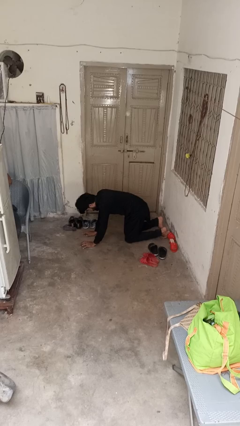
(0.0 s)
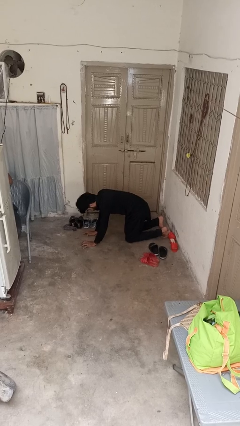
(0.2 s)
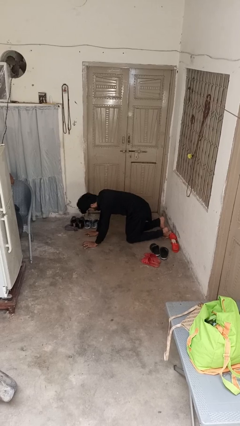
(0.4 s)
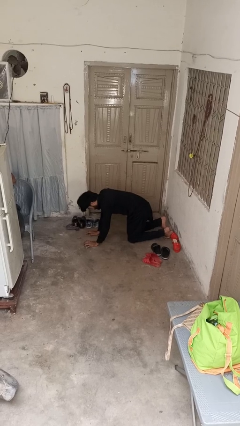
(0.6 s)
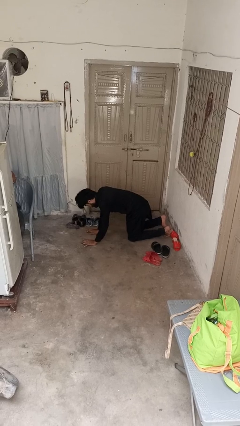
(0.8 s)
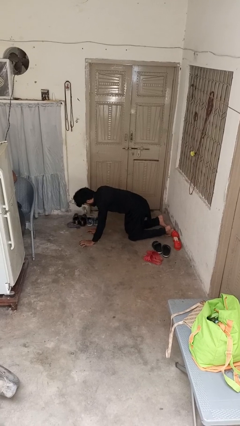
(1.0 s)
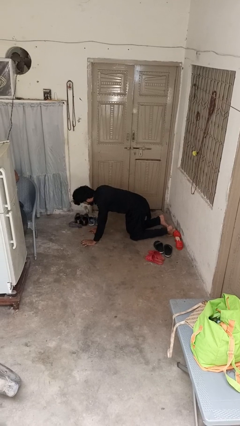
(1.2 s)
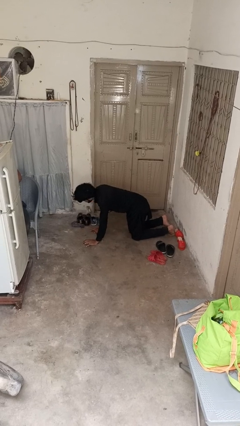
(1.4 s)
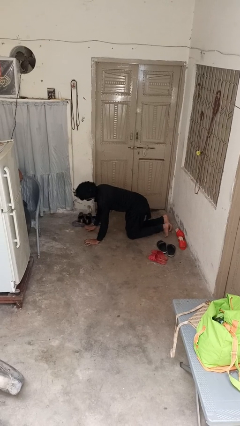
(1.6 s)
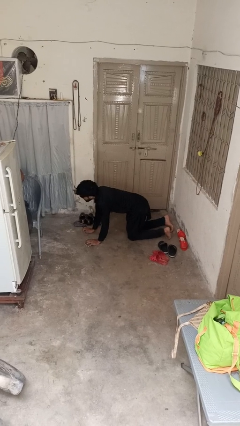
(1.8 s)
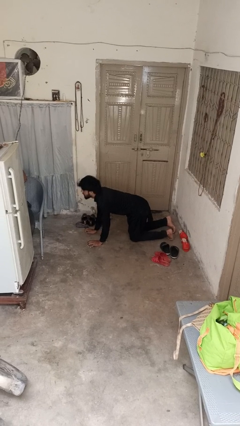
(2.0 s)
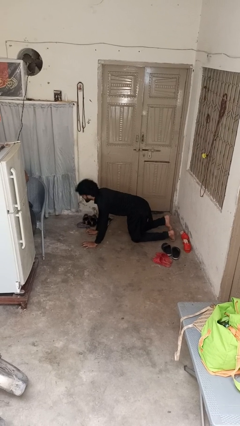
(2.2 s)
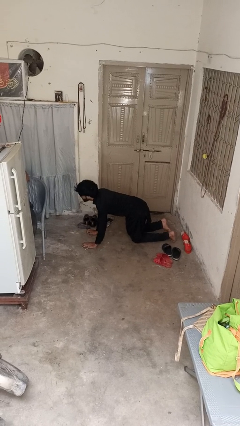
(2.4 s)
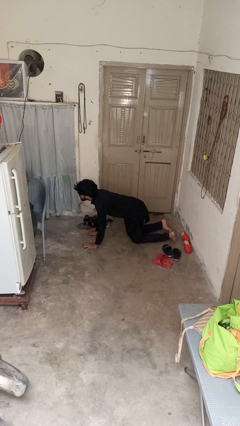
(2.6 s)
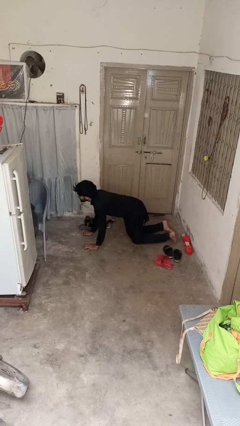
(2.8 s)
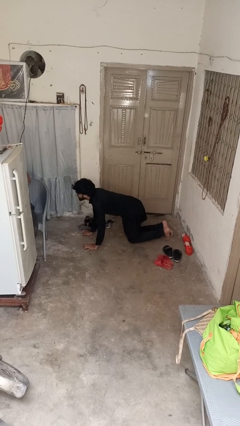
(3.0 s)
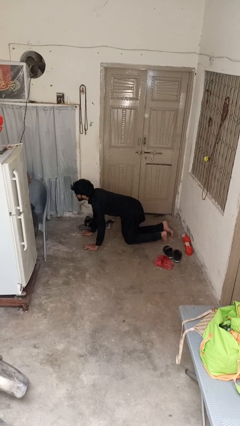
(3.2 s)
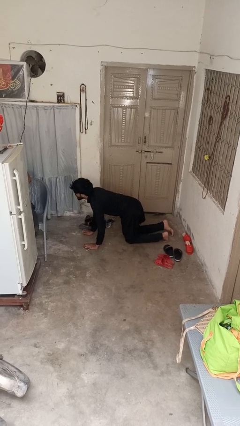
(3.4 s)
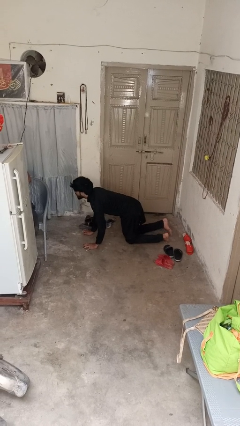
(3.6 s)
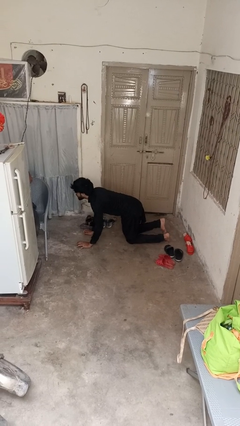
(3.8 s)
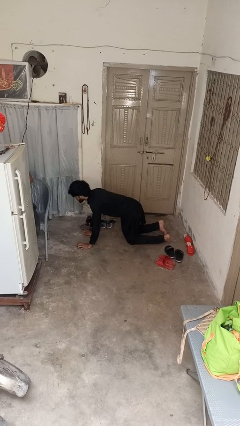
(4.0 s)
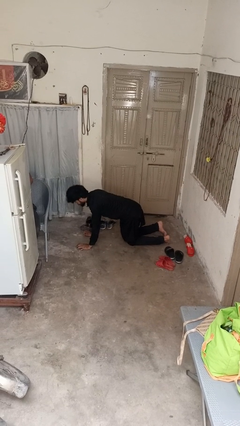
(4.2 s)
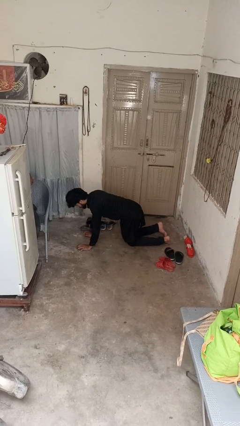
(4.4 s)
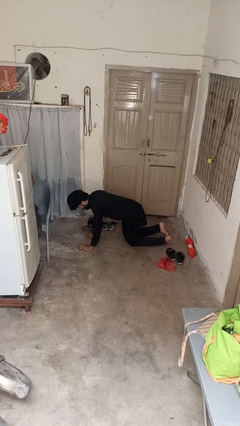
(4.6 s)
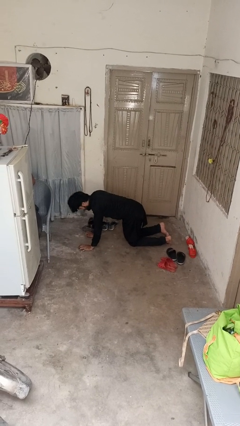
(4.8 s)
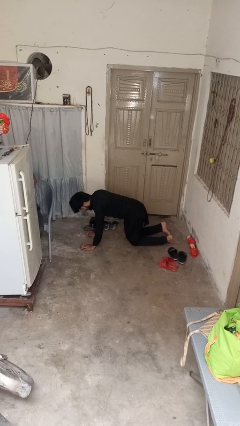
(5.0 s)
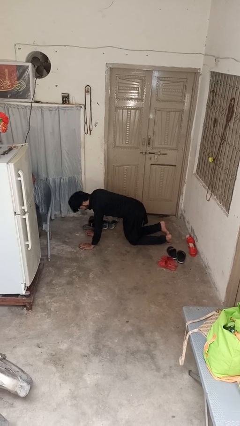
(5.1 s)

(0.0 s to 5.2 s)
person crawls

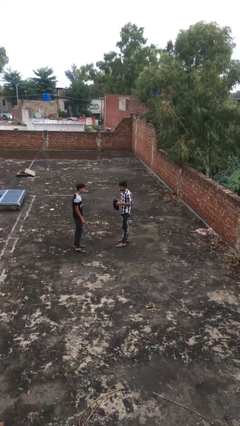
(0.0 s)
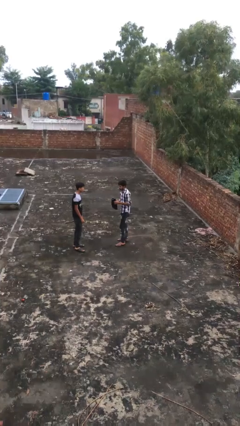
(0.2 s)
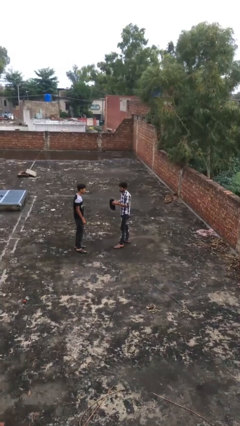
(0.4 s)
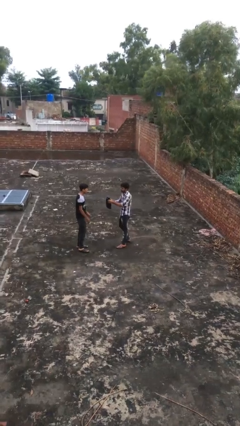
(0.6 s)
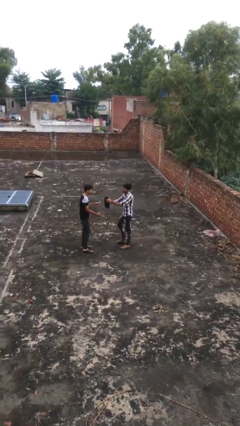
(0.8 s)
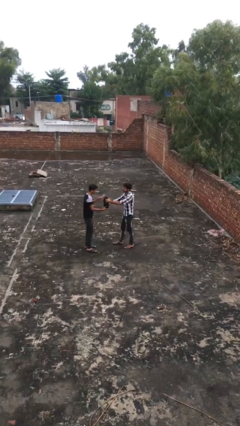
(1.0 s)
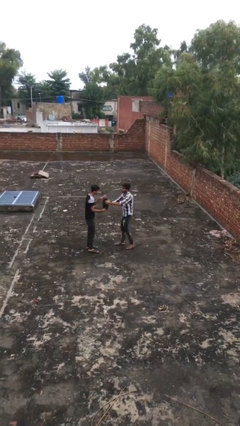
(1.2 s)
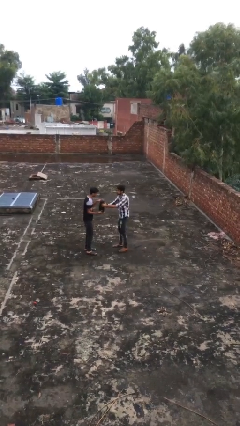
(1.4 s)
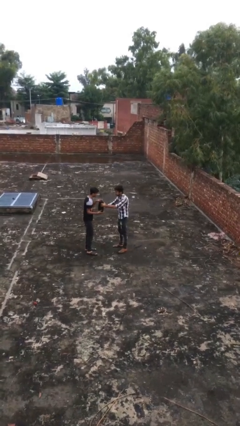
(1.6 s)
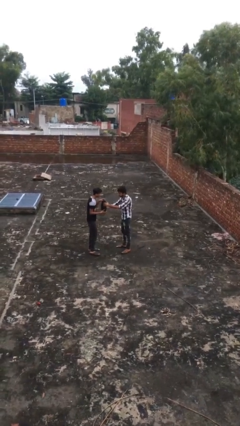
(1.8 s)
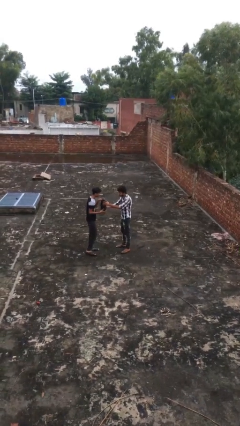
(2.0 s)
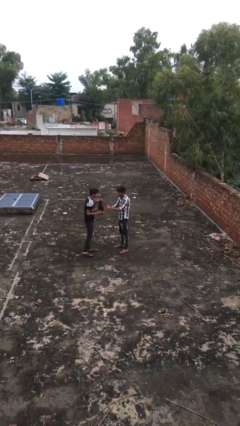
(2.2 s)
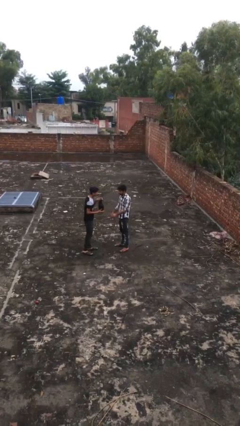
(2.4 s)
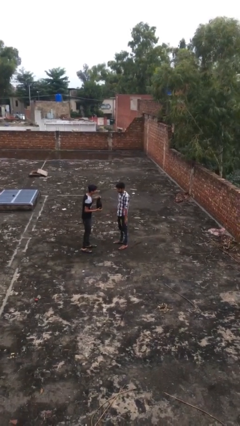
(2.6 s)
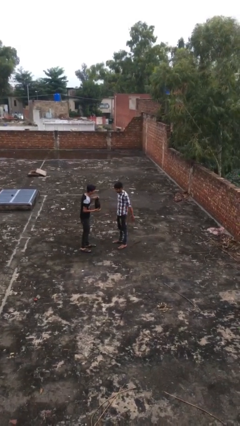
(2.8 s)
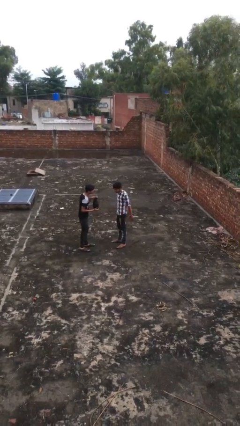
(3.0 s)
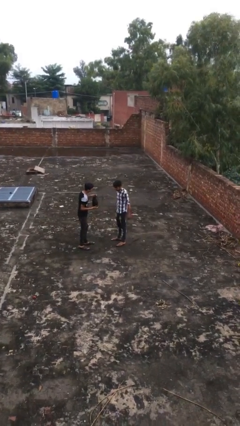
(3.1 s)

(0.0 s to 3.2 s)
person transfers object to person

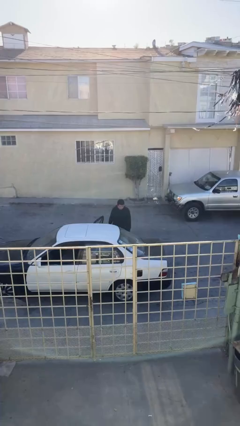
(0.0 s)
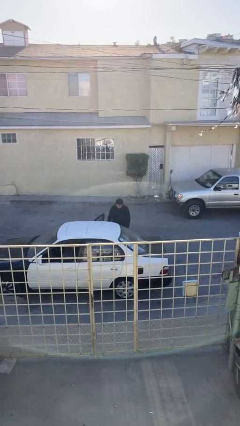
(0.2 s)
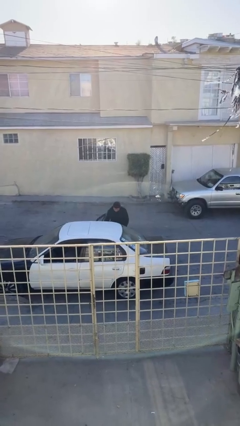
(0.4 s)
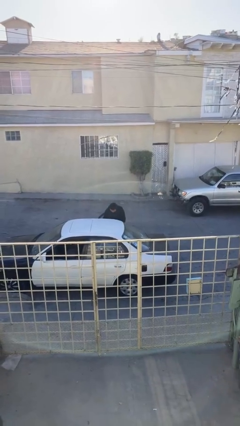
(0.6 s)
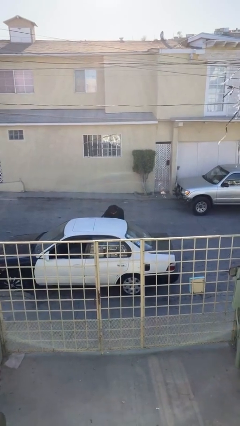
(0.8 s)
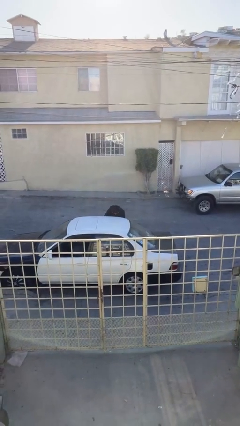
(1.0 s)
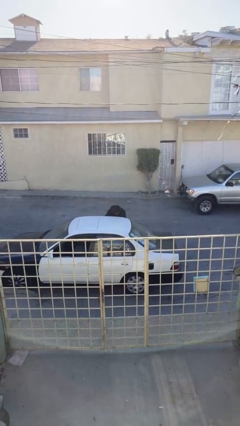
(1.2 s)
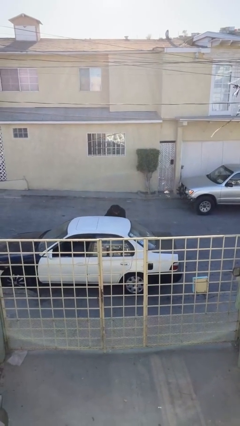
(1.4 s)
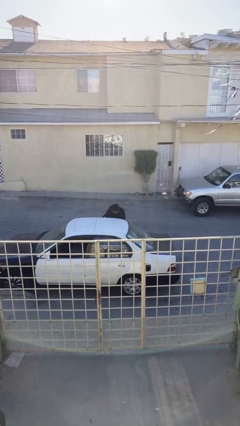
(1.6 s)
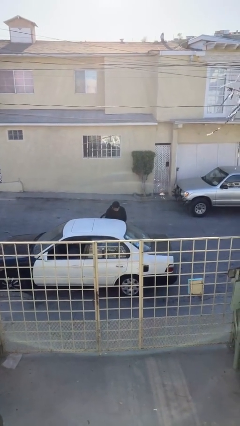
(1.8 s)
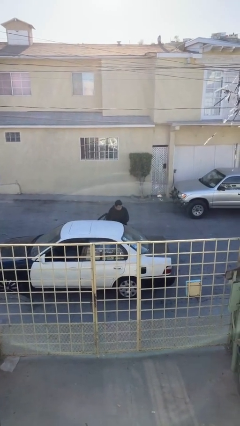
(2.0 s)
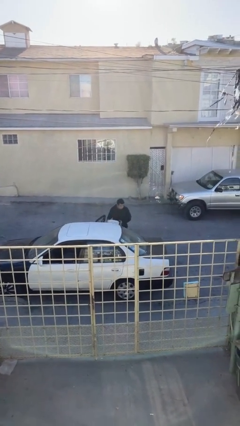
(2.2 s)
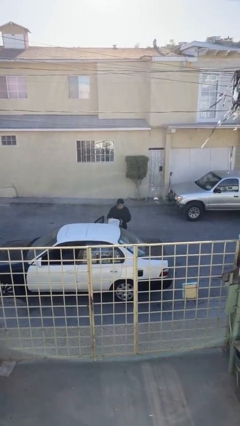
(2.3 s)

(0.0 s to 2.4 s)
person unloads car

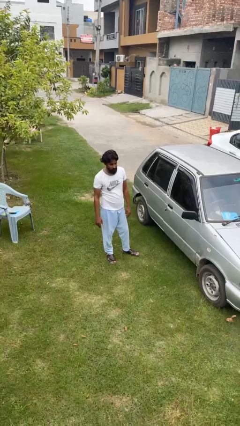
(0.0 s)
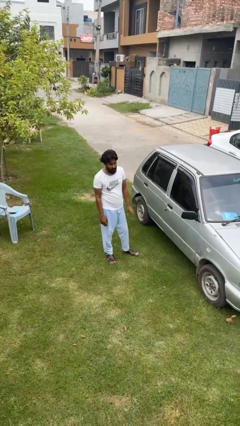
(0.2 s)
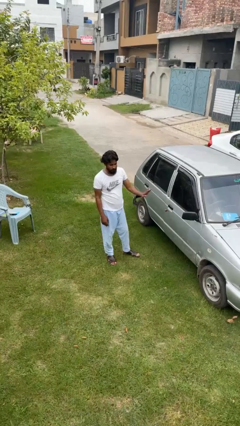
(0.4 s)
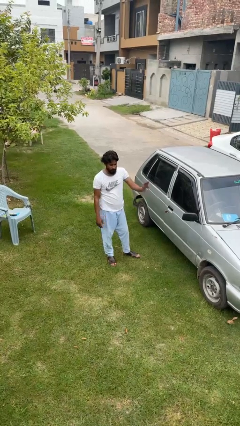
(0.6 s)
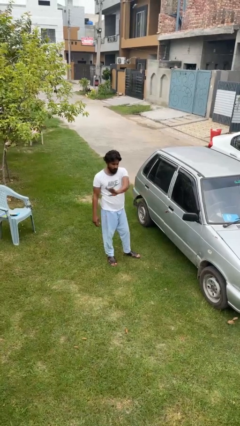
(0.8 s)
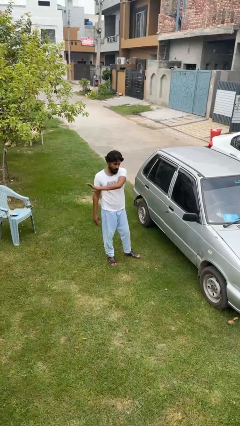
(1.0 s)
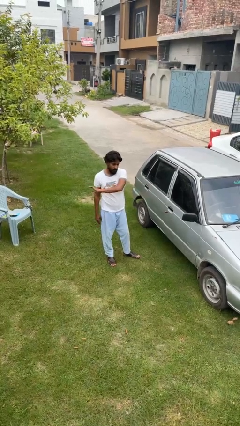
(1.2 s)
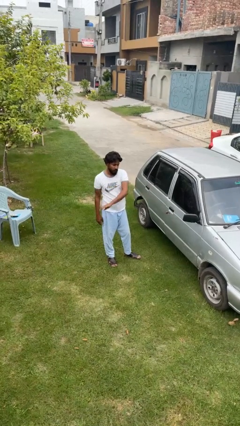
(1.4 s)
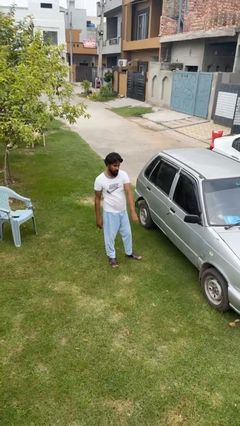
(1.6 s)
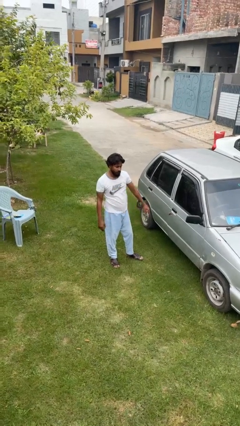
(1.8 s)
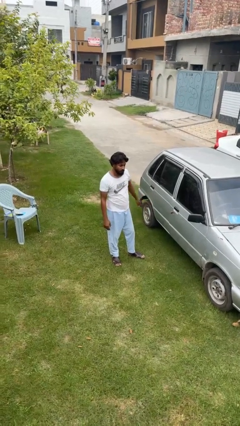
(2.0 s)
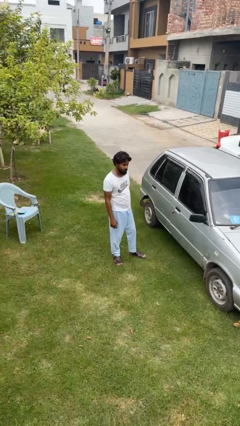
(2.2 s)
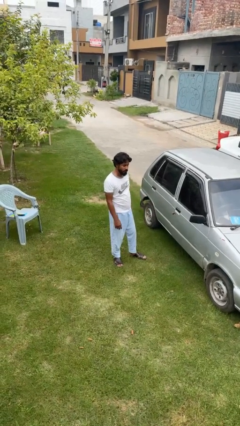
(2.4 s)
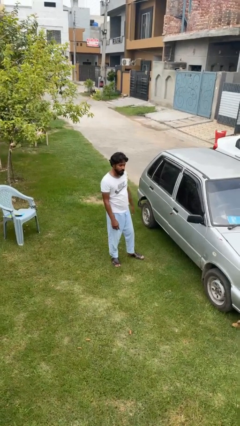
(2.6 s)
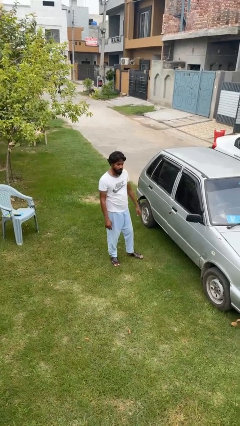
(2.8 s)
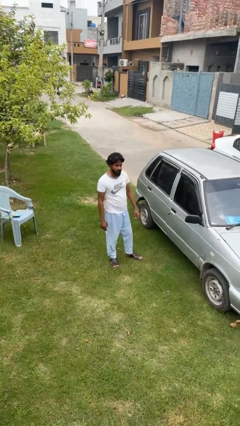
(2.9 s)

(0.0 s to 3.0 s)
person gestures swipe right

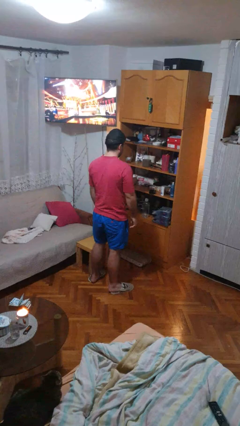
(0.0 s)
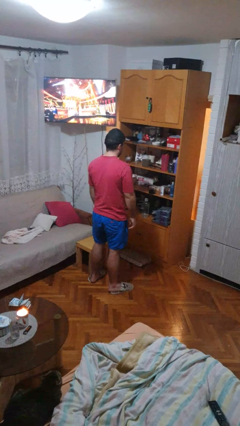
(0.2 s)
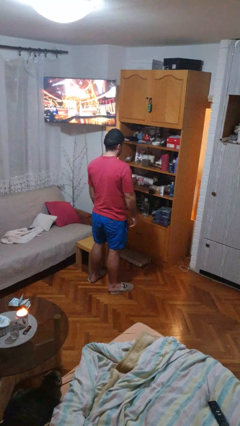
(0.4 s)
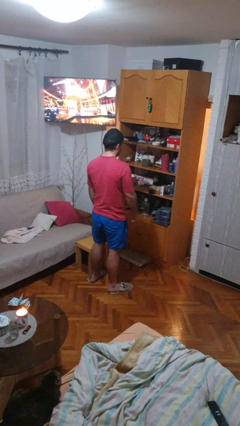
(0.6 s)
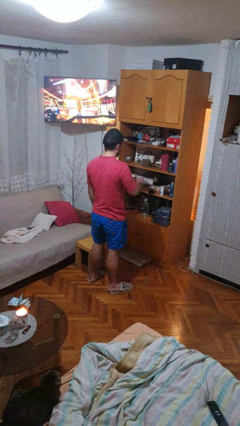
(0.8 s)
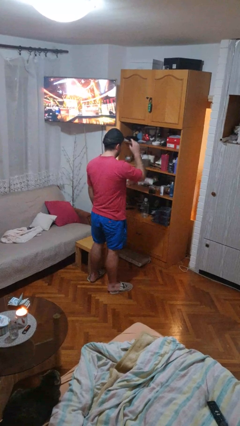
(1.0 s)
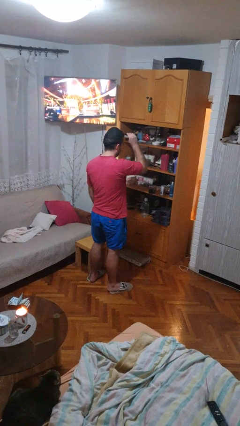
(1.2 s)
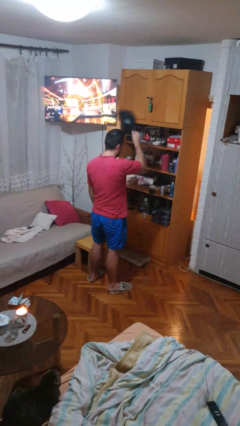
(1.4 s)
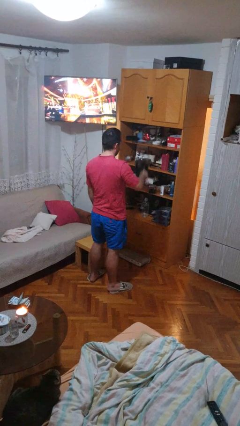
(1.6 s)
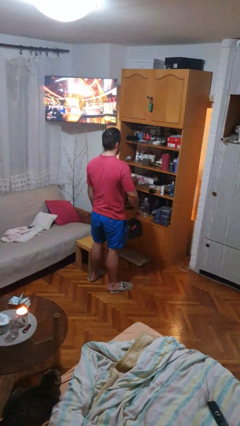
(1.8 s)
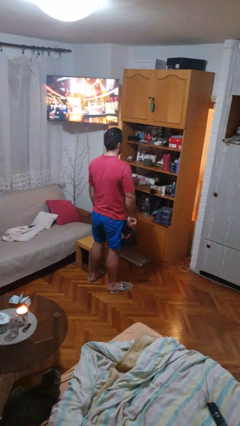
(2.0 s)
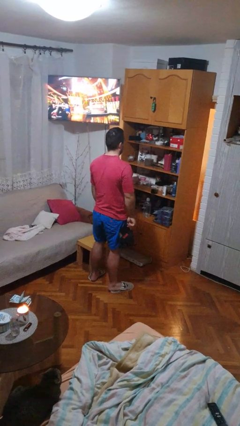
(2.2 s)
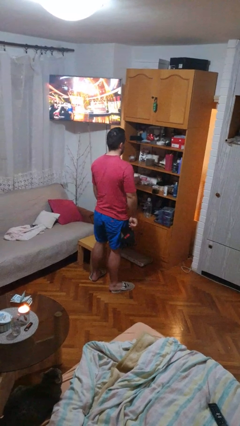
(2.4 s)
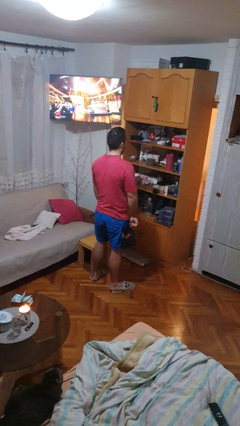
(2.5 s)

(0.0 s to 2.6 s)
person takes off hat

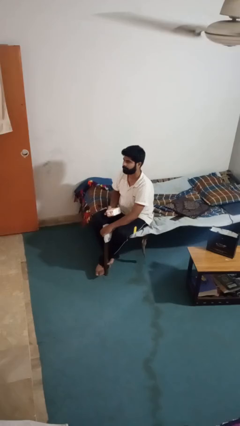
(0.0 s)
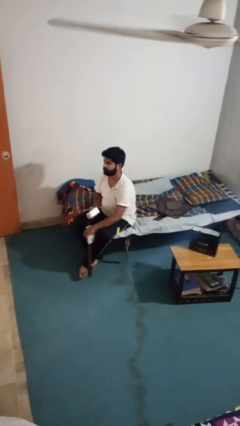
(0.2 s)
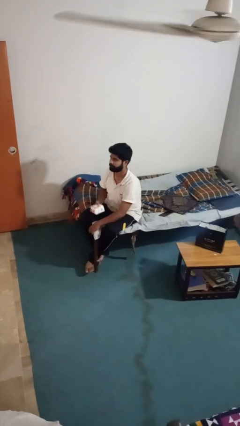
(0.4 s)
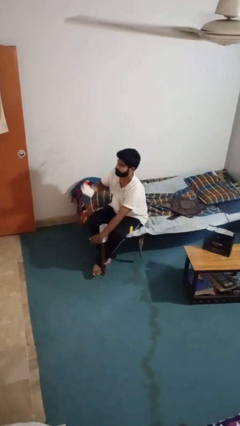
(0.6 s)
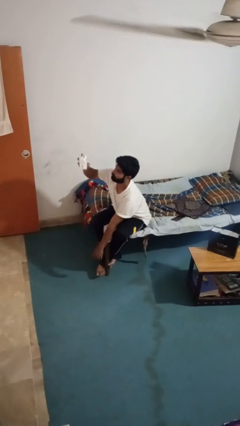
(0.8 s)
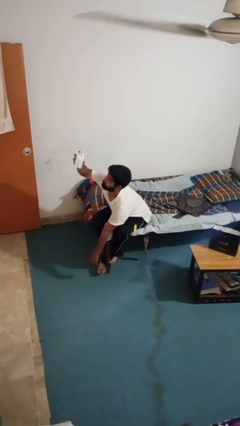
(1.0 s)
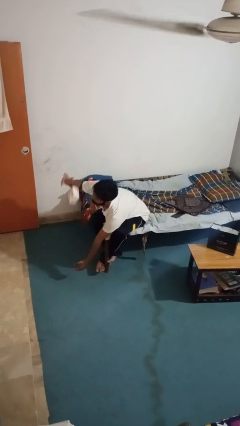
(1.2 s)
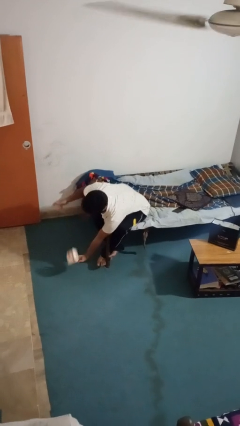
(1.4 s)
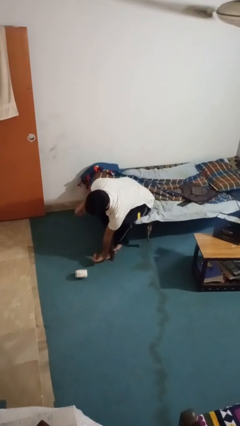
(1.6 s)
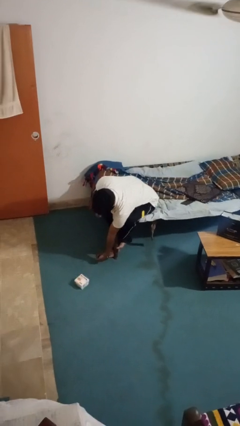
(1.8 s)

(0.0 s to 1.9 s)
person drops object
